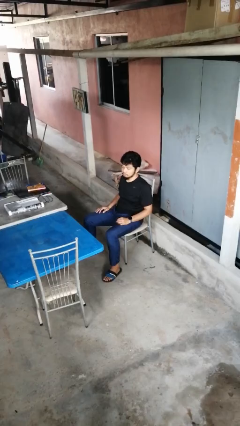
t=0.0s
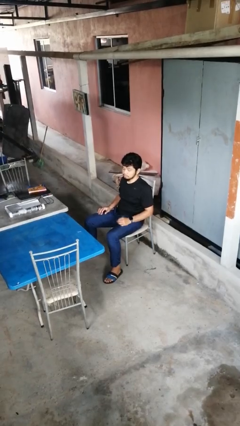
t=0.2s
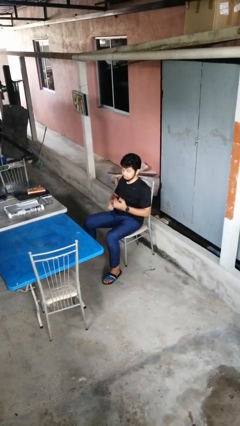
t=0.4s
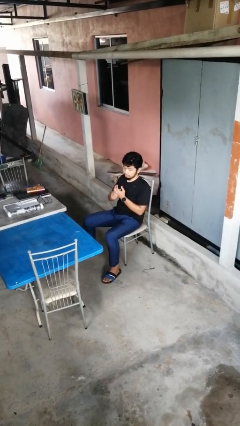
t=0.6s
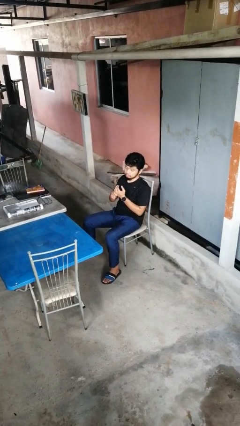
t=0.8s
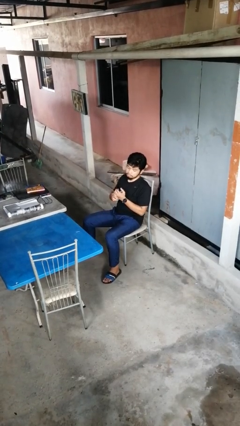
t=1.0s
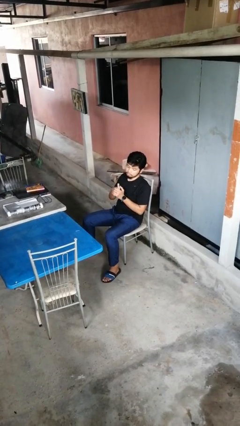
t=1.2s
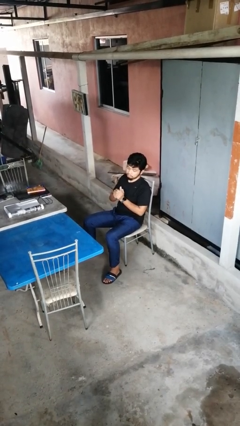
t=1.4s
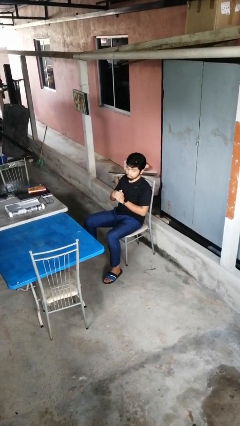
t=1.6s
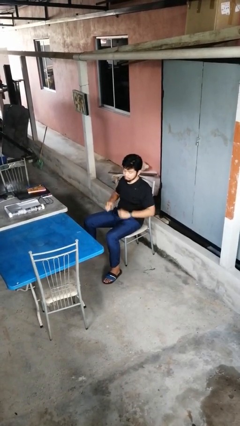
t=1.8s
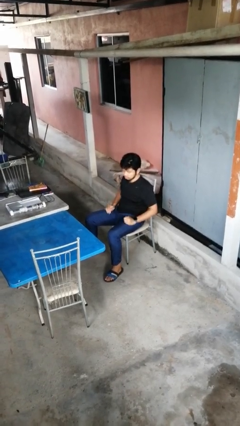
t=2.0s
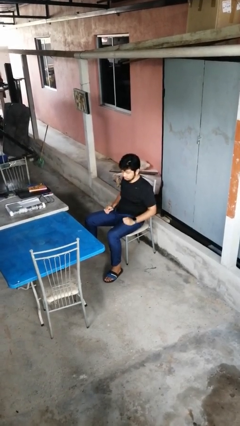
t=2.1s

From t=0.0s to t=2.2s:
person cracks knuckles

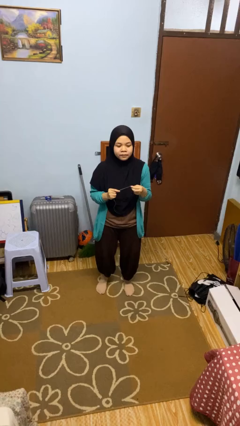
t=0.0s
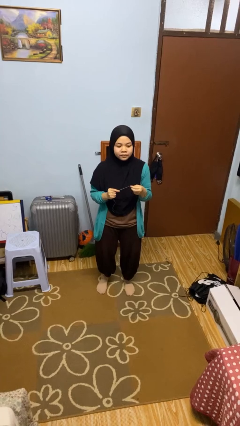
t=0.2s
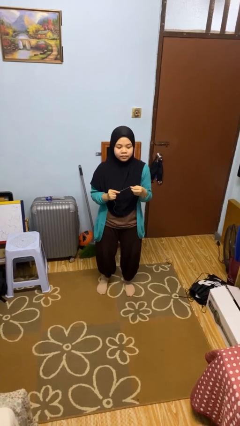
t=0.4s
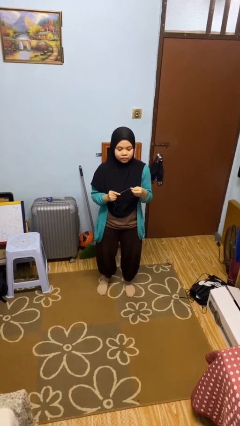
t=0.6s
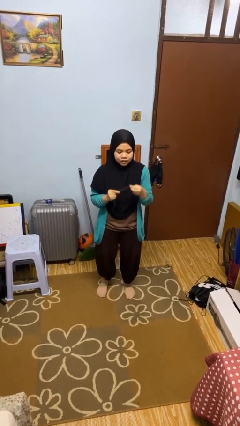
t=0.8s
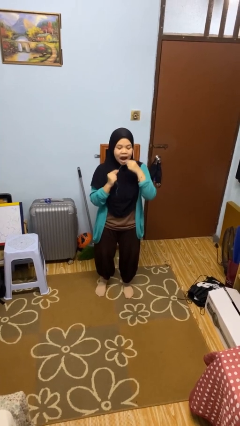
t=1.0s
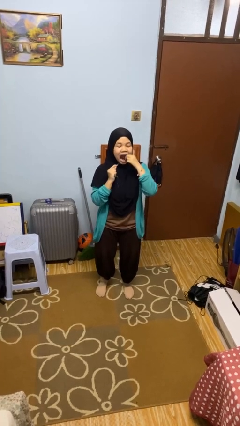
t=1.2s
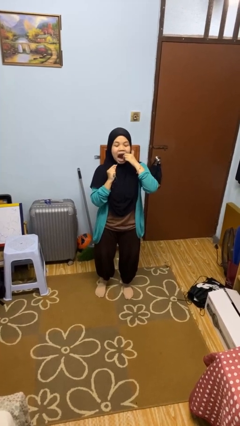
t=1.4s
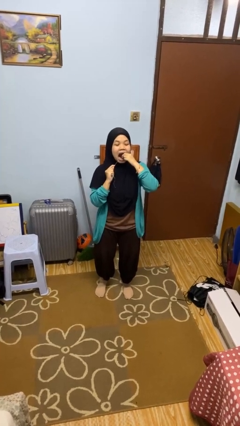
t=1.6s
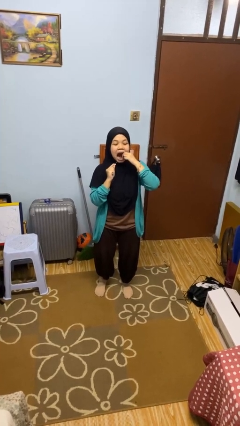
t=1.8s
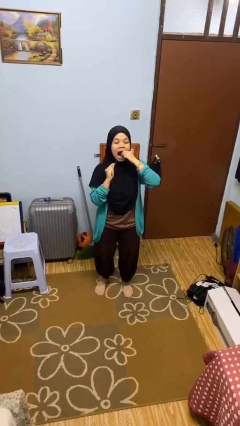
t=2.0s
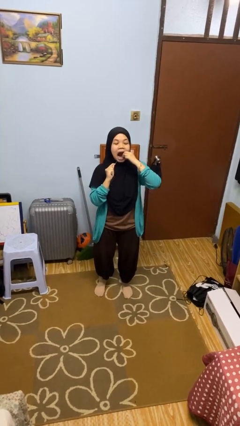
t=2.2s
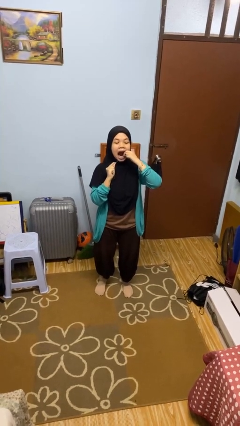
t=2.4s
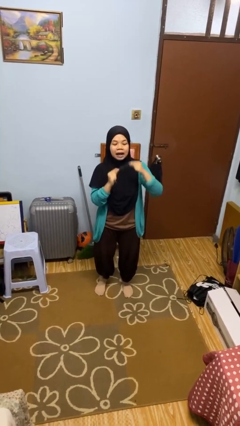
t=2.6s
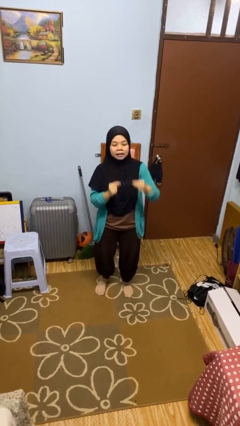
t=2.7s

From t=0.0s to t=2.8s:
person flosses

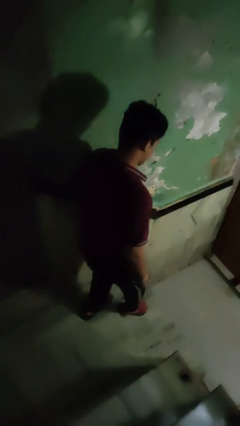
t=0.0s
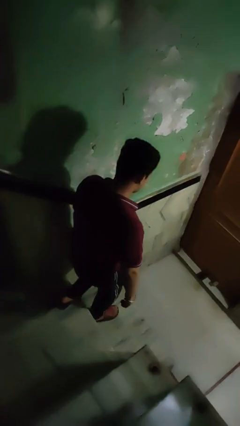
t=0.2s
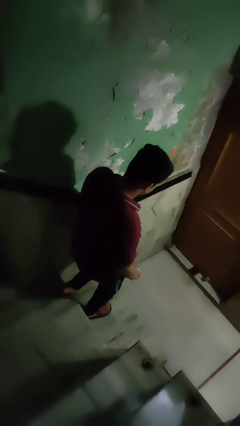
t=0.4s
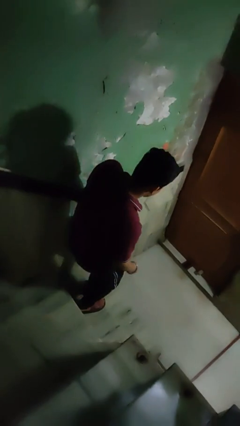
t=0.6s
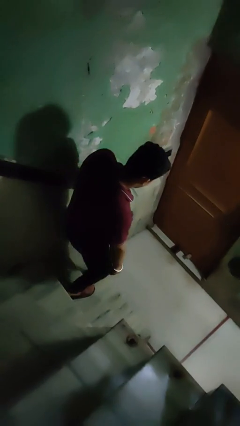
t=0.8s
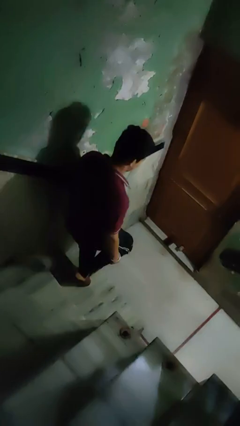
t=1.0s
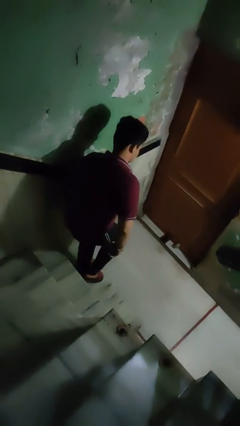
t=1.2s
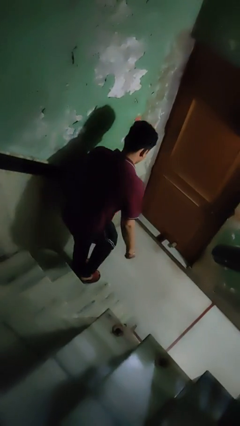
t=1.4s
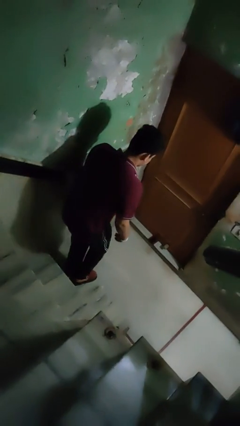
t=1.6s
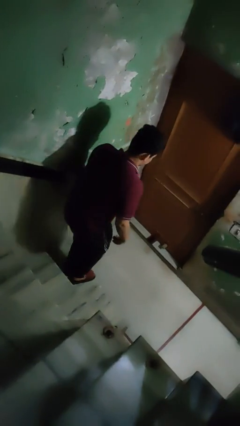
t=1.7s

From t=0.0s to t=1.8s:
person climbs down stairs

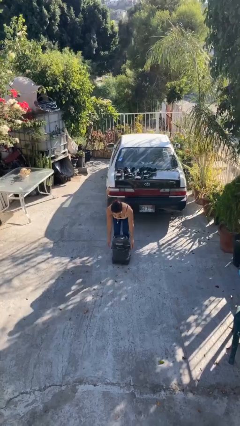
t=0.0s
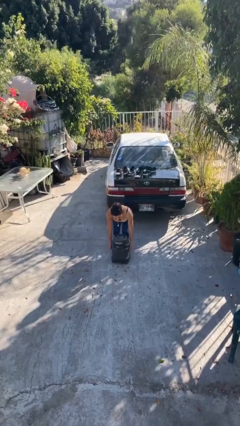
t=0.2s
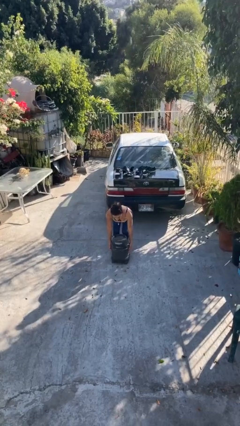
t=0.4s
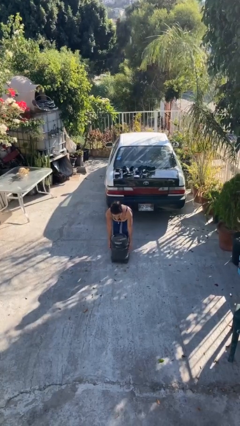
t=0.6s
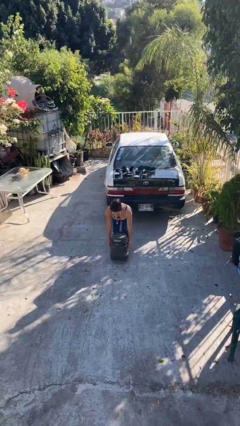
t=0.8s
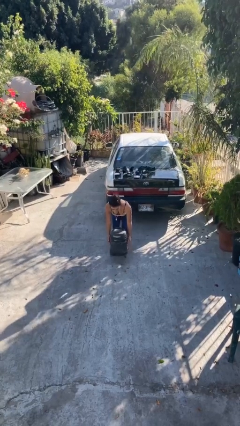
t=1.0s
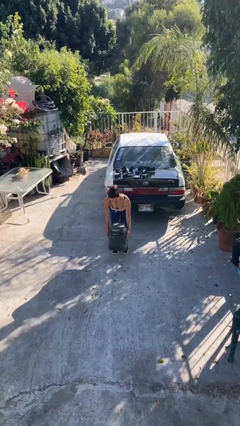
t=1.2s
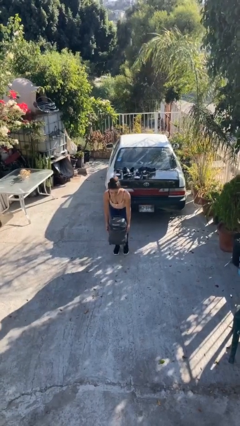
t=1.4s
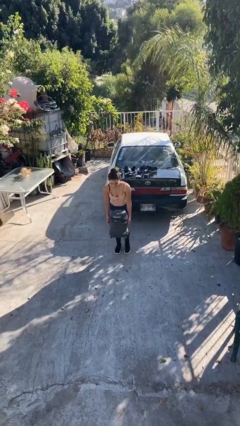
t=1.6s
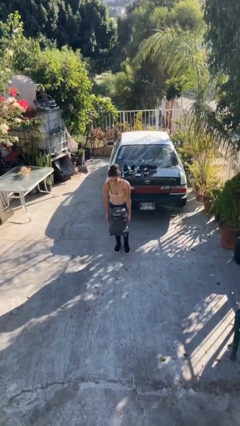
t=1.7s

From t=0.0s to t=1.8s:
person picks up object from floor

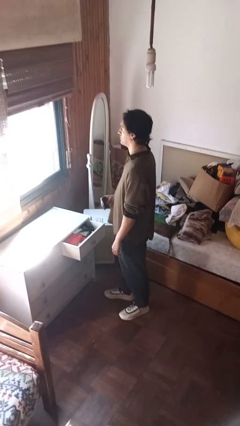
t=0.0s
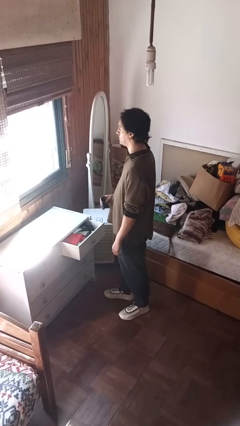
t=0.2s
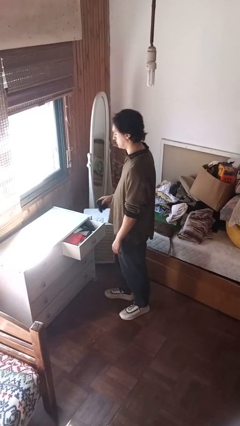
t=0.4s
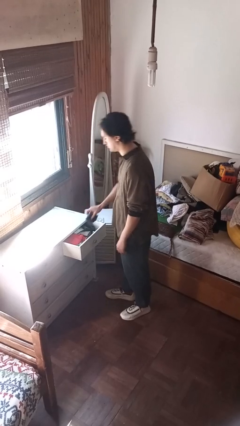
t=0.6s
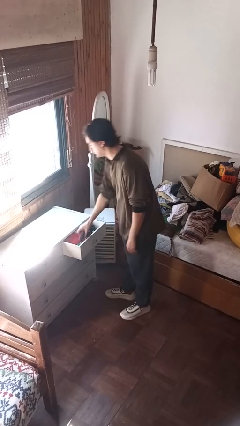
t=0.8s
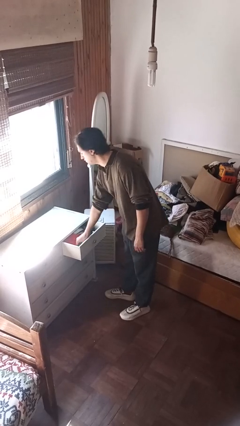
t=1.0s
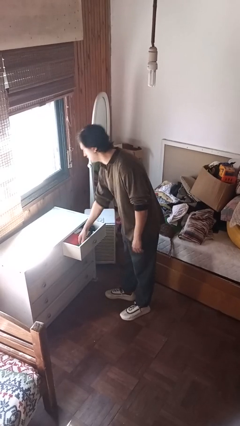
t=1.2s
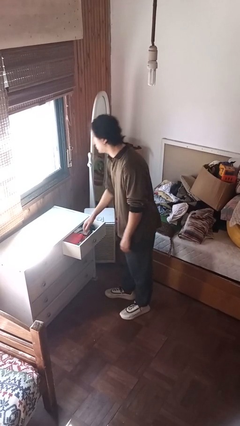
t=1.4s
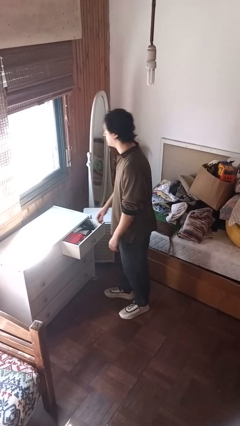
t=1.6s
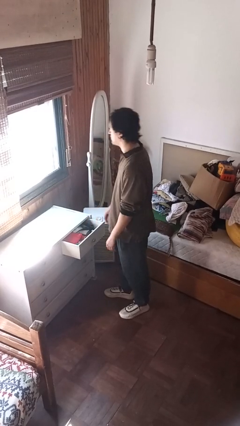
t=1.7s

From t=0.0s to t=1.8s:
person puts clothes into dresser

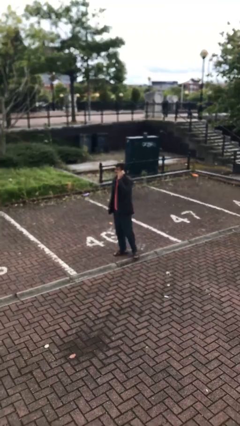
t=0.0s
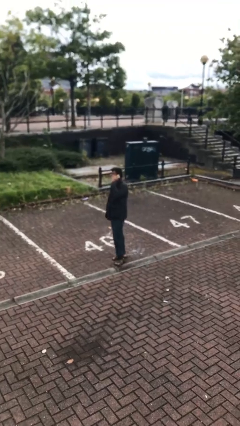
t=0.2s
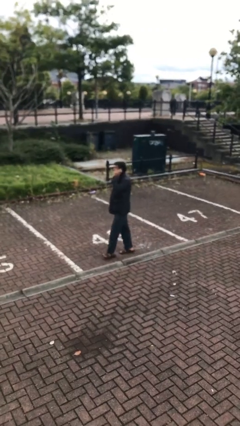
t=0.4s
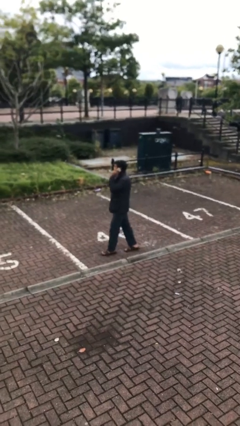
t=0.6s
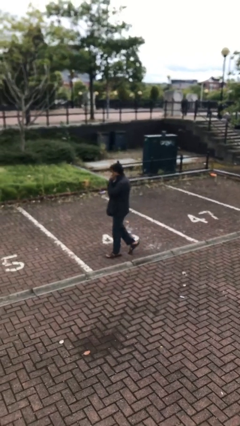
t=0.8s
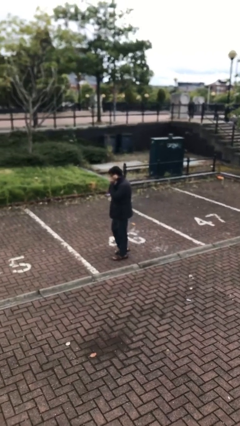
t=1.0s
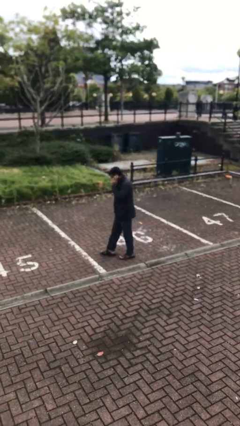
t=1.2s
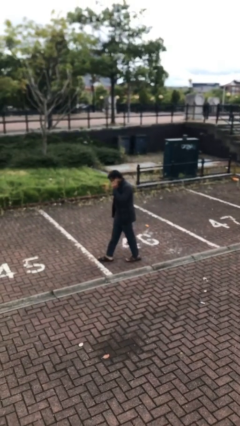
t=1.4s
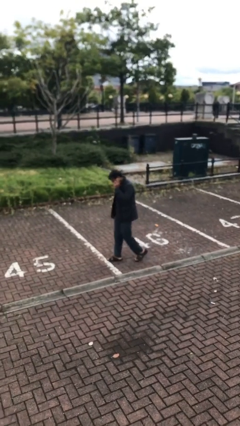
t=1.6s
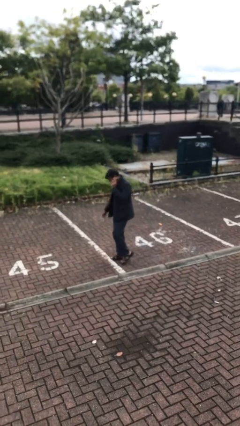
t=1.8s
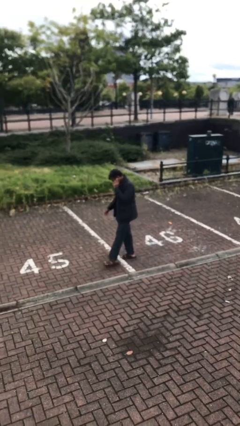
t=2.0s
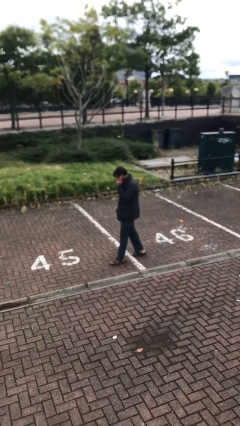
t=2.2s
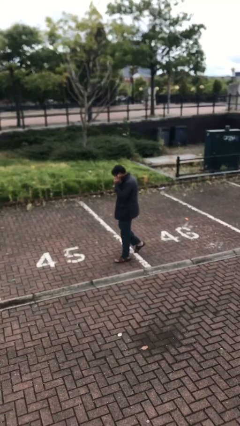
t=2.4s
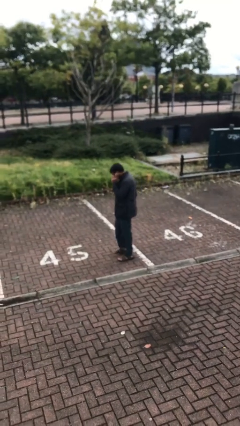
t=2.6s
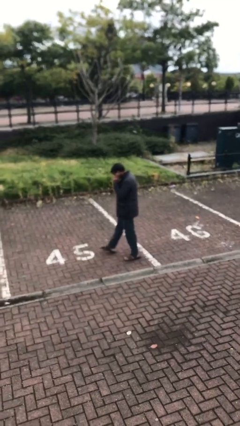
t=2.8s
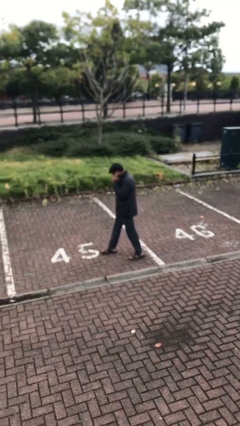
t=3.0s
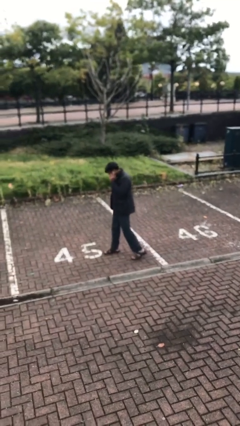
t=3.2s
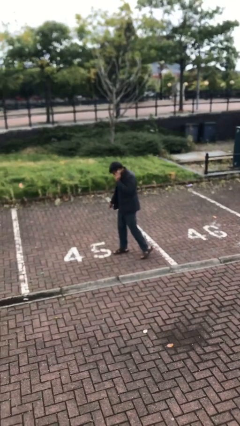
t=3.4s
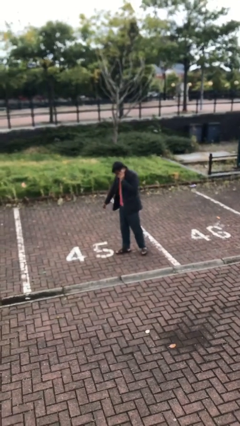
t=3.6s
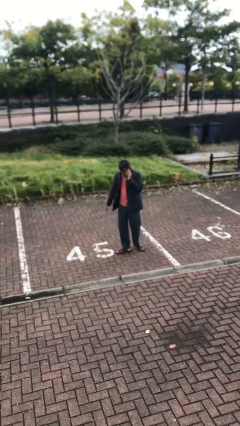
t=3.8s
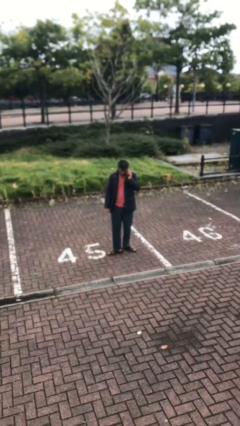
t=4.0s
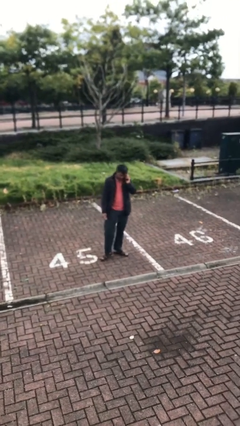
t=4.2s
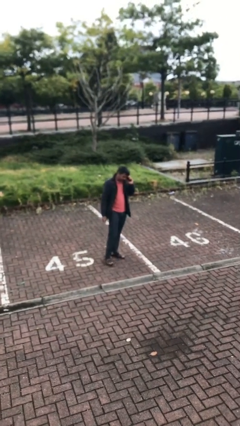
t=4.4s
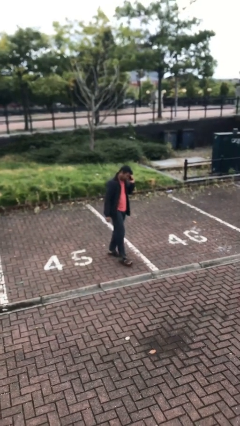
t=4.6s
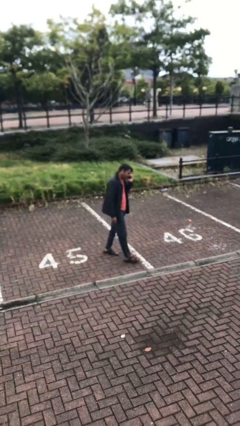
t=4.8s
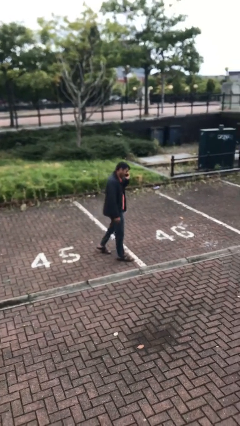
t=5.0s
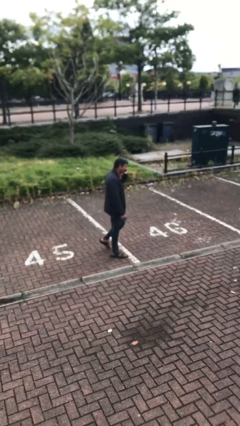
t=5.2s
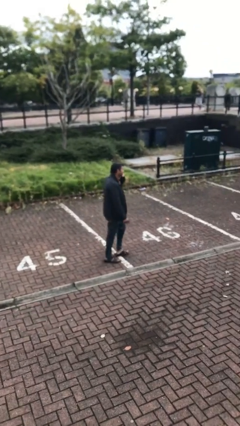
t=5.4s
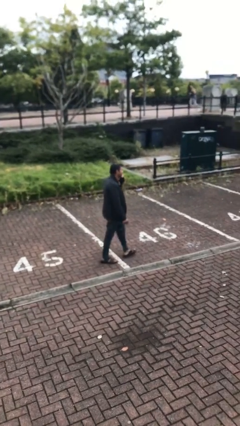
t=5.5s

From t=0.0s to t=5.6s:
person talks on phone

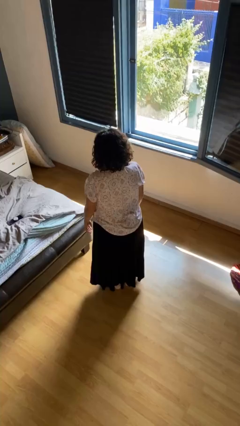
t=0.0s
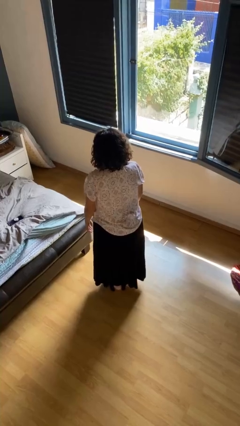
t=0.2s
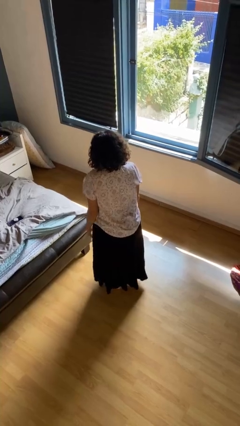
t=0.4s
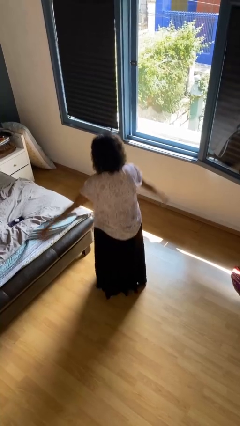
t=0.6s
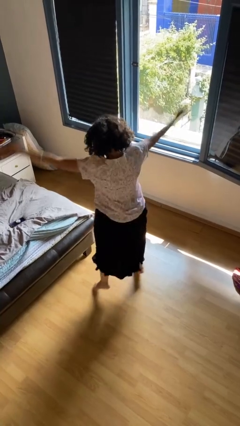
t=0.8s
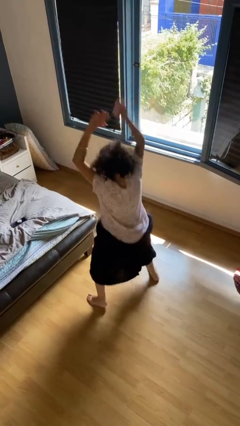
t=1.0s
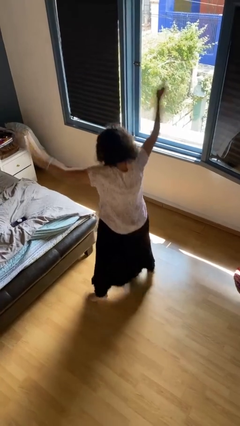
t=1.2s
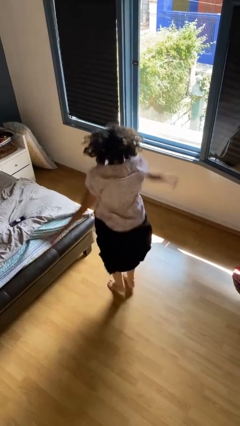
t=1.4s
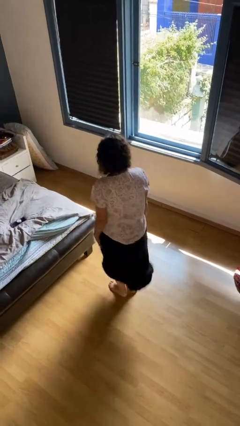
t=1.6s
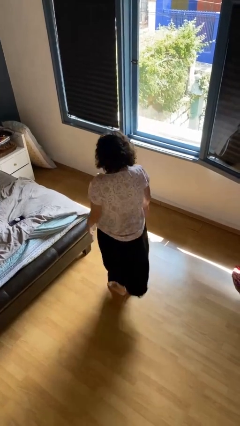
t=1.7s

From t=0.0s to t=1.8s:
person exercises with jumping jacks
